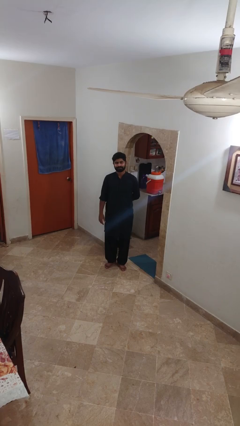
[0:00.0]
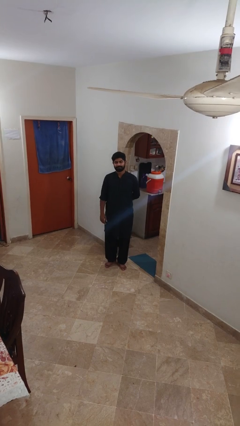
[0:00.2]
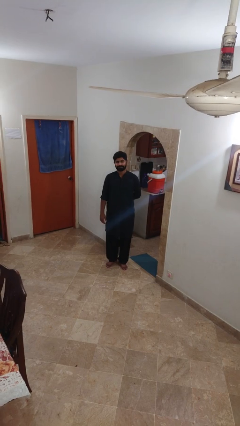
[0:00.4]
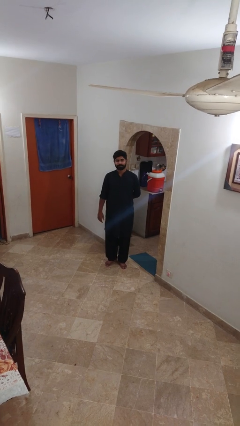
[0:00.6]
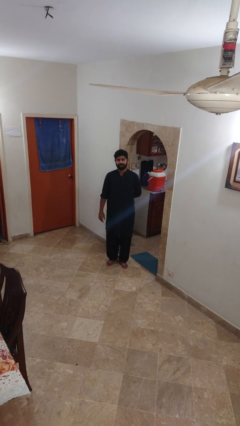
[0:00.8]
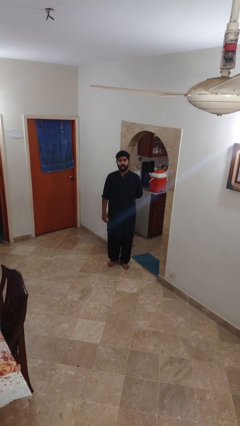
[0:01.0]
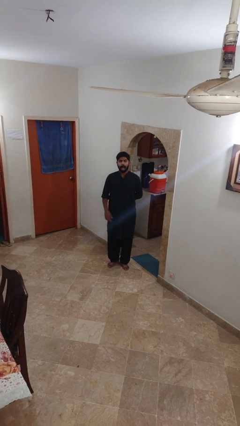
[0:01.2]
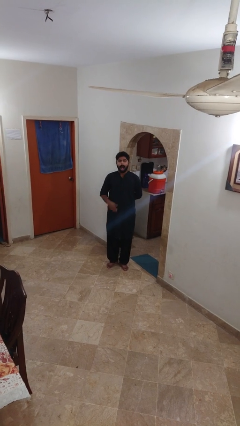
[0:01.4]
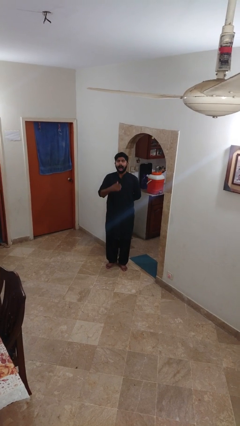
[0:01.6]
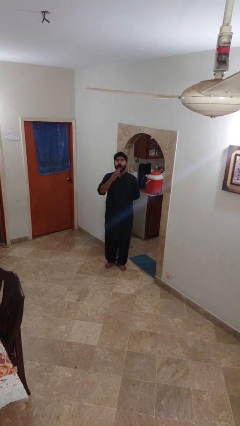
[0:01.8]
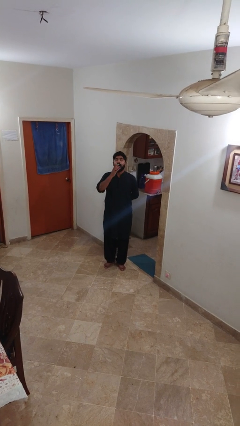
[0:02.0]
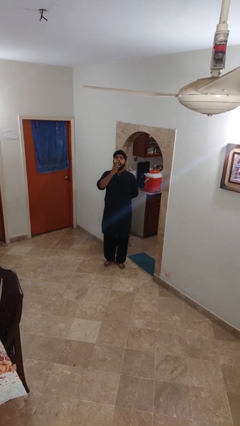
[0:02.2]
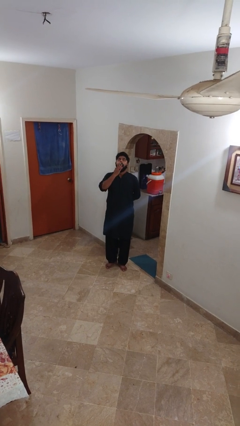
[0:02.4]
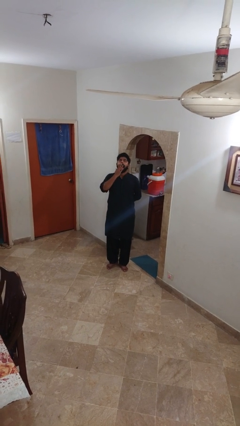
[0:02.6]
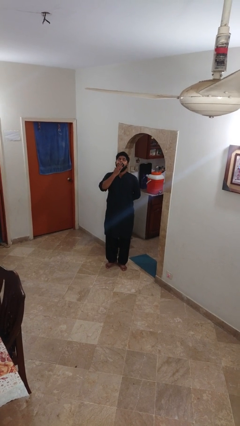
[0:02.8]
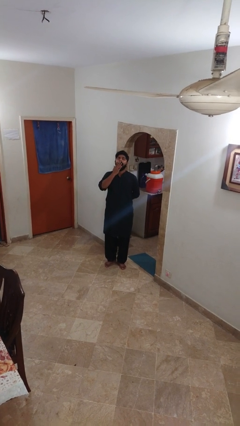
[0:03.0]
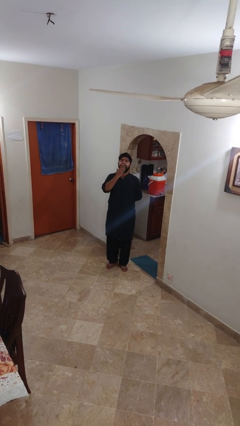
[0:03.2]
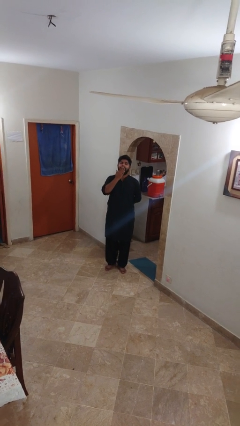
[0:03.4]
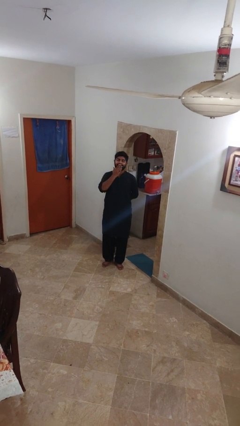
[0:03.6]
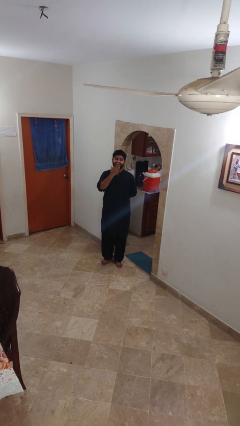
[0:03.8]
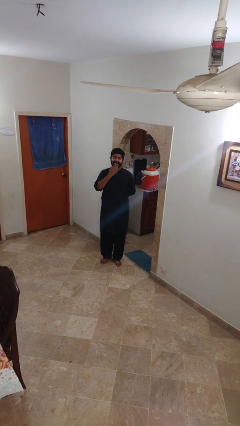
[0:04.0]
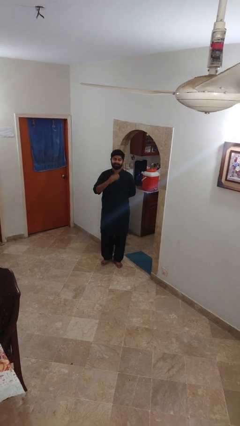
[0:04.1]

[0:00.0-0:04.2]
person yawns

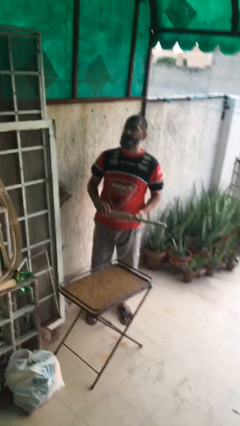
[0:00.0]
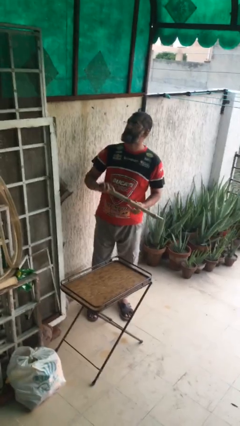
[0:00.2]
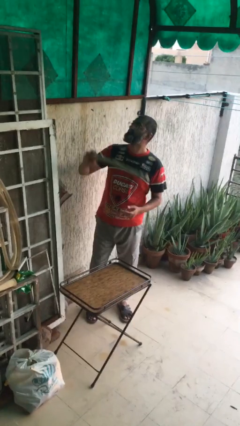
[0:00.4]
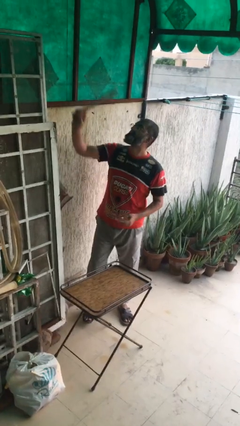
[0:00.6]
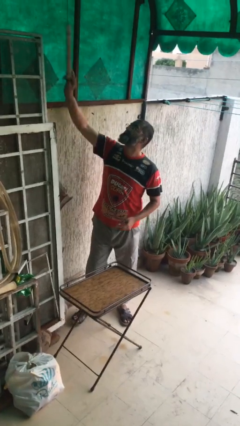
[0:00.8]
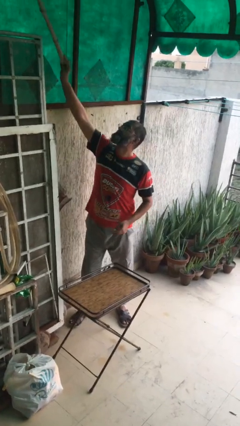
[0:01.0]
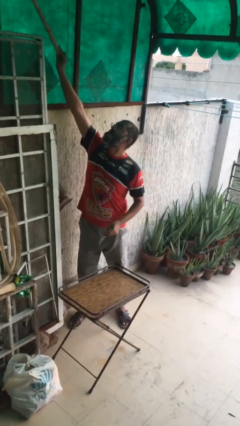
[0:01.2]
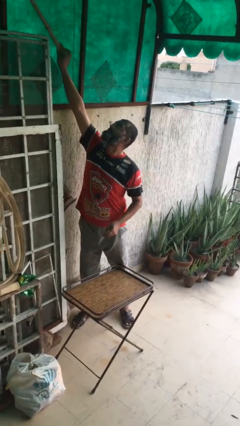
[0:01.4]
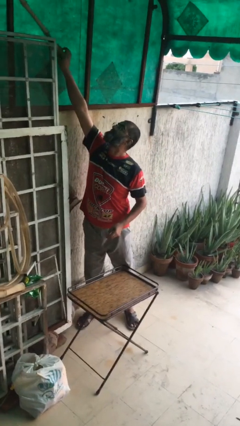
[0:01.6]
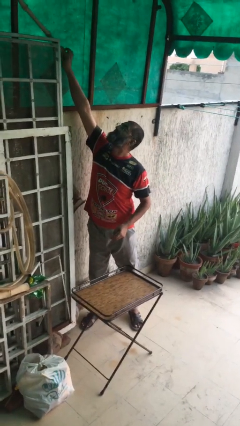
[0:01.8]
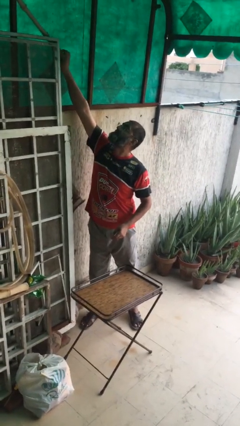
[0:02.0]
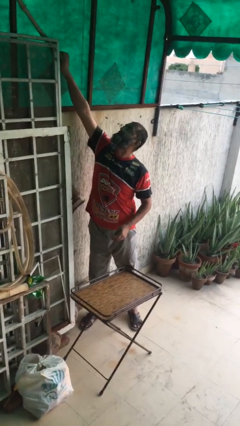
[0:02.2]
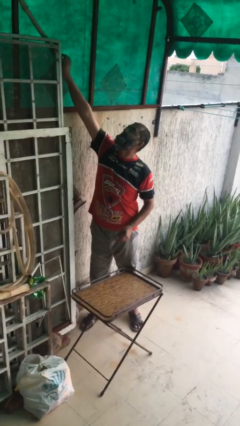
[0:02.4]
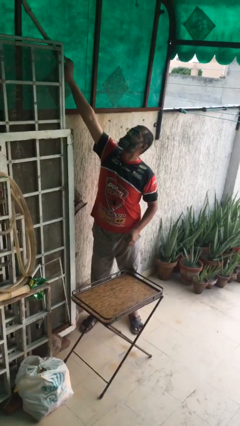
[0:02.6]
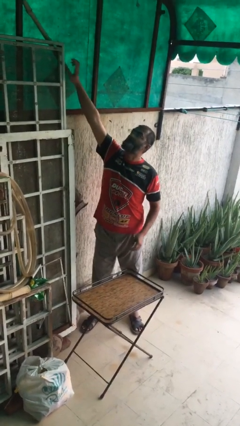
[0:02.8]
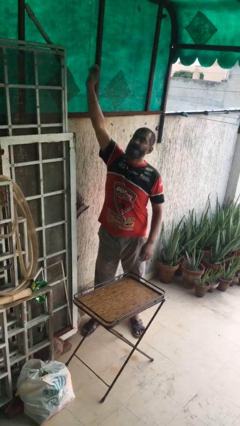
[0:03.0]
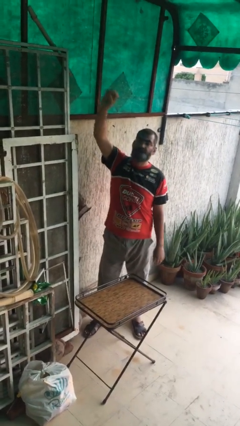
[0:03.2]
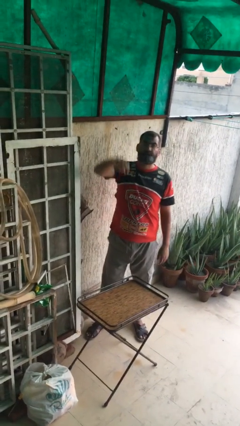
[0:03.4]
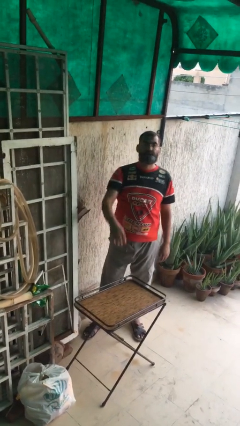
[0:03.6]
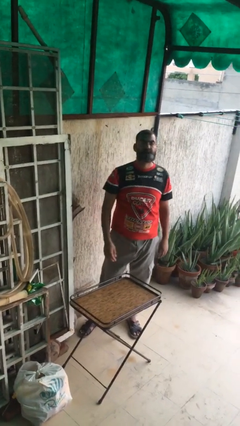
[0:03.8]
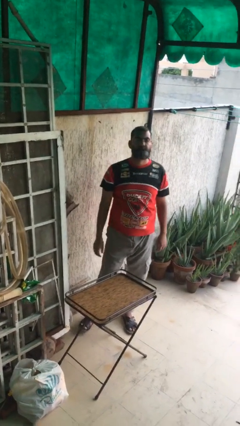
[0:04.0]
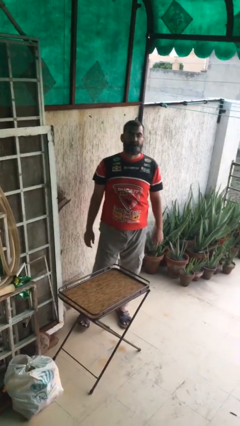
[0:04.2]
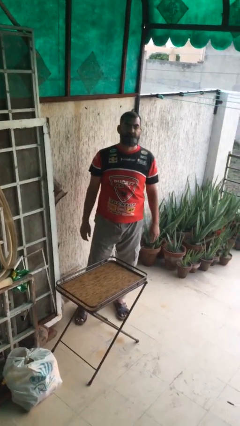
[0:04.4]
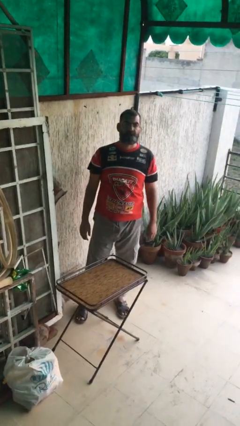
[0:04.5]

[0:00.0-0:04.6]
person puts down object on shelf

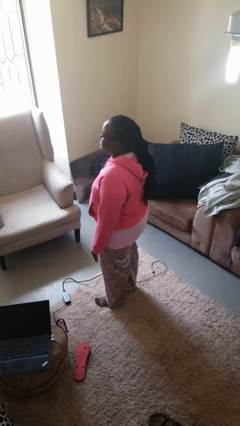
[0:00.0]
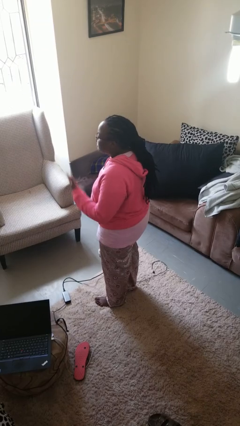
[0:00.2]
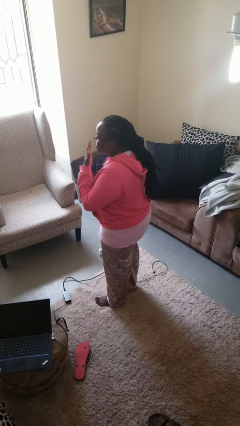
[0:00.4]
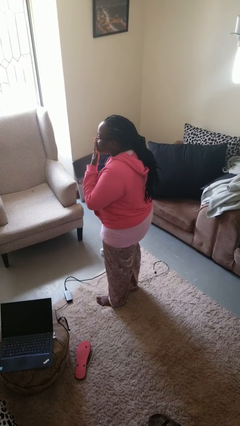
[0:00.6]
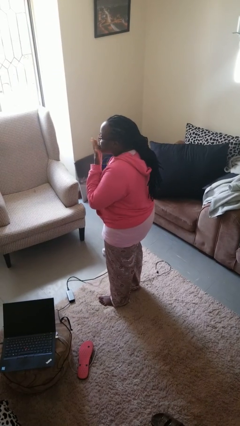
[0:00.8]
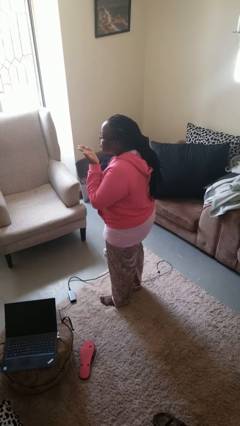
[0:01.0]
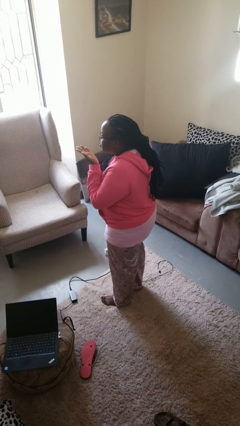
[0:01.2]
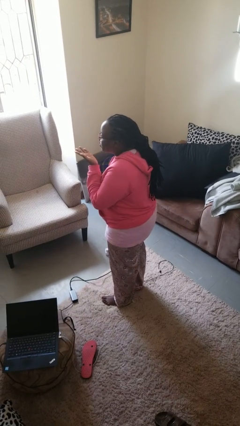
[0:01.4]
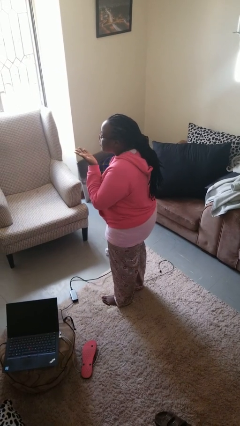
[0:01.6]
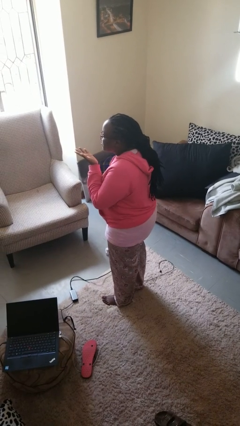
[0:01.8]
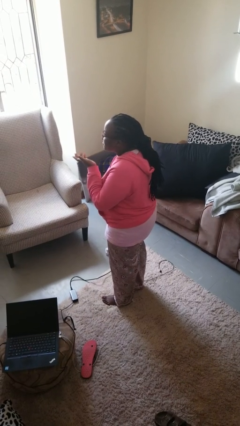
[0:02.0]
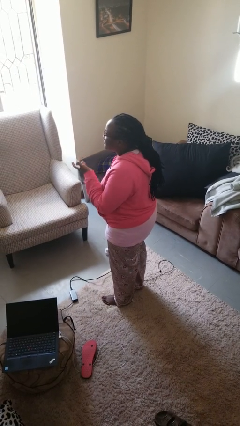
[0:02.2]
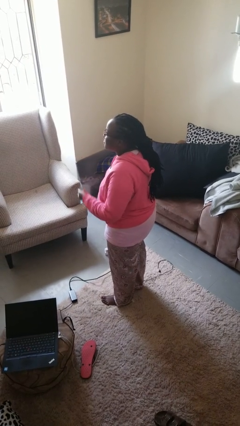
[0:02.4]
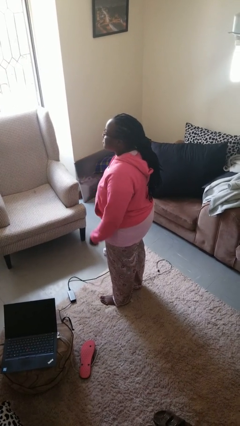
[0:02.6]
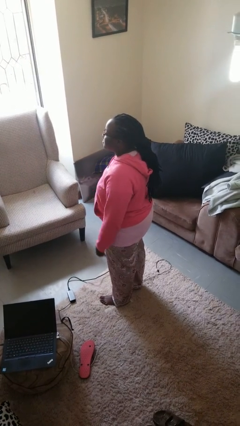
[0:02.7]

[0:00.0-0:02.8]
person gestures blow kiss

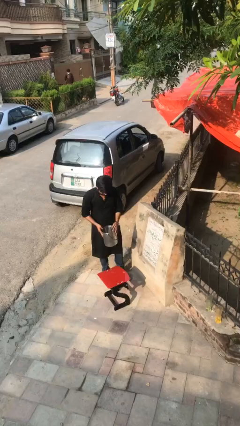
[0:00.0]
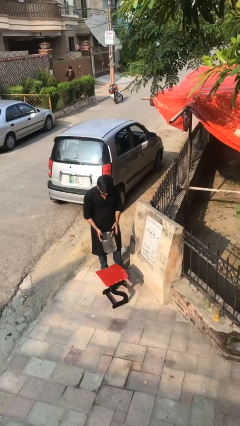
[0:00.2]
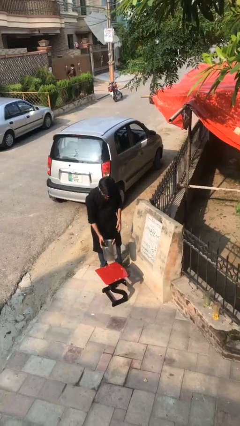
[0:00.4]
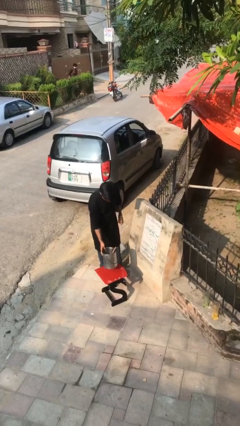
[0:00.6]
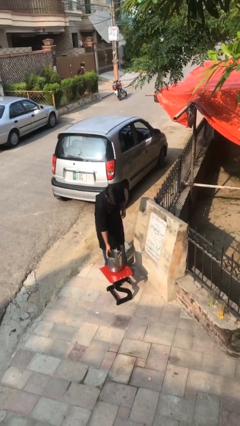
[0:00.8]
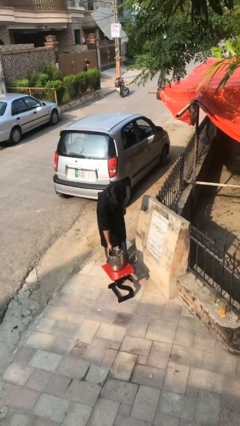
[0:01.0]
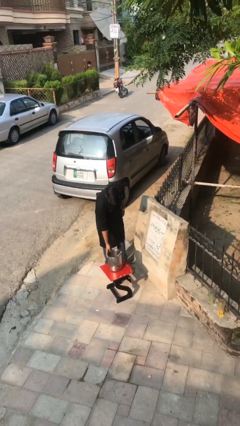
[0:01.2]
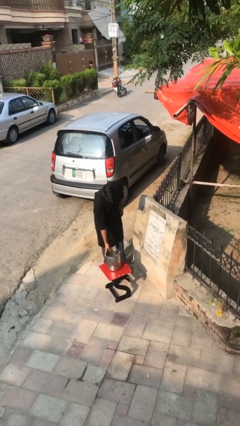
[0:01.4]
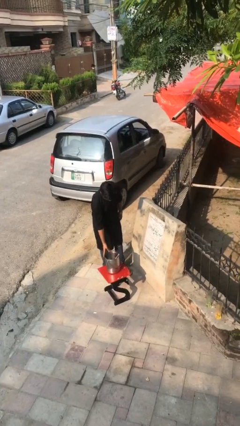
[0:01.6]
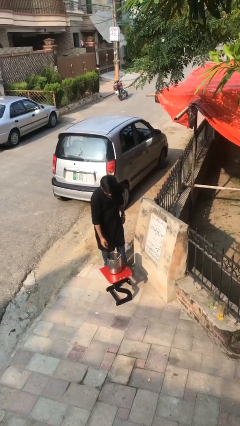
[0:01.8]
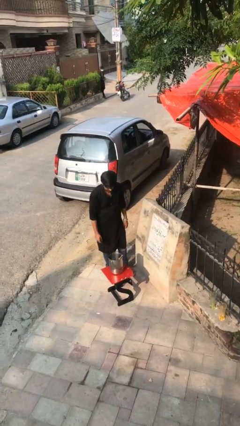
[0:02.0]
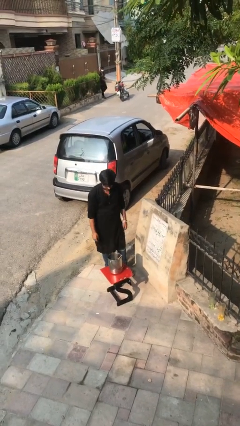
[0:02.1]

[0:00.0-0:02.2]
person puts down object on table

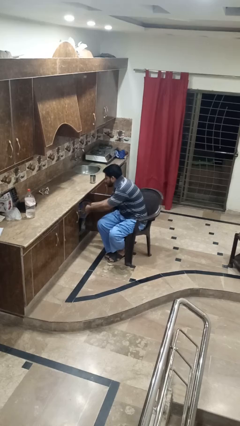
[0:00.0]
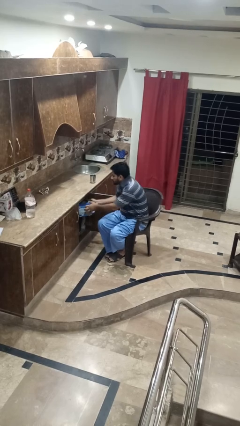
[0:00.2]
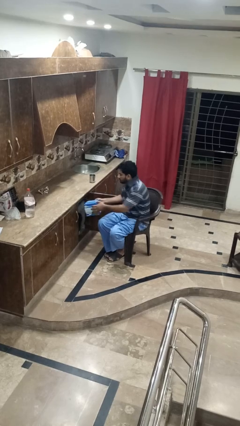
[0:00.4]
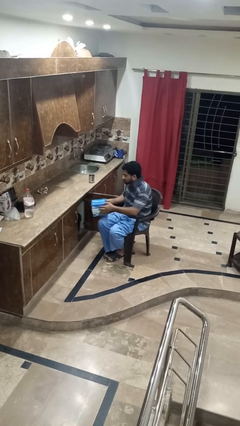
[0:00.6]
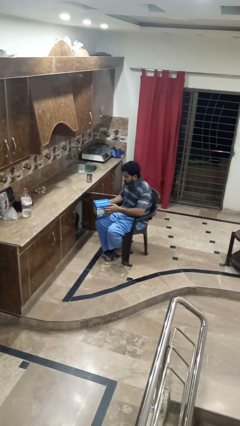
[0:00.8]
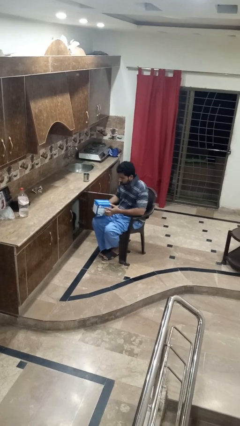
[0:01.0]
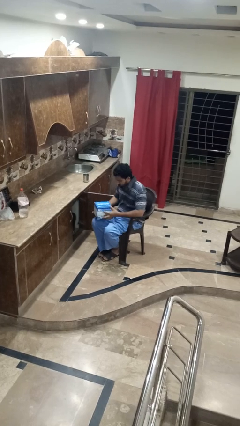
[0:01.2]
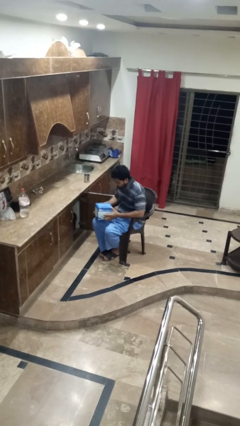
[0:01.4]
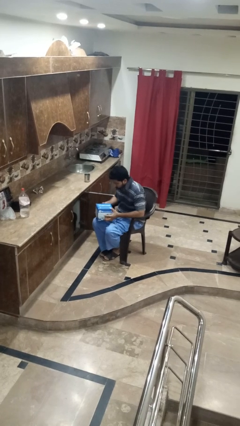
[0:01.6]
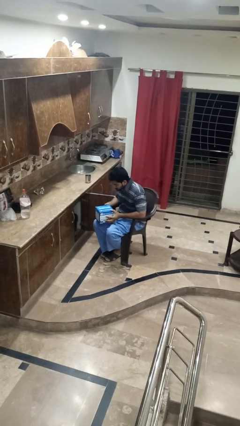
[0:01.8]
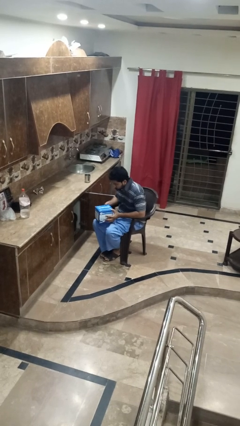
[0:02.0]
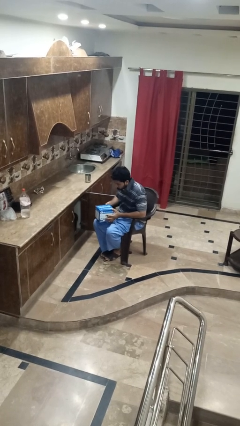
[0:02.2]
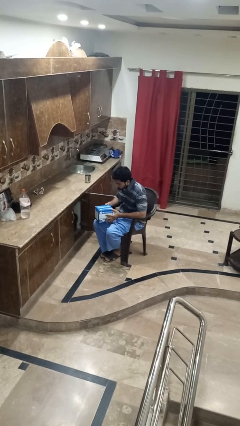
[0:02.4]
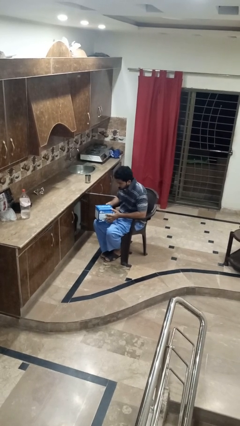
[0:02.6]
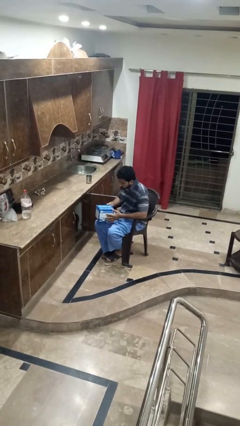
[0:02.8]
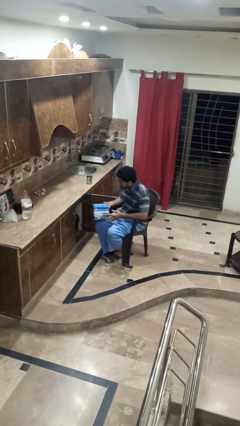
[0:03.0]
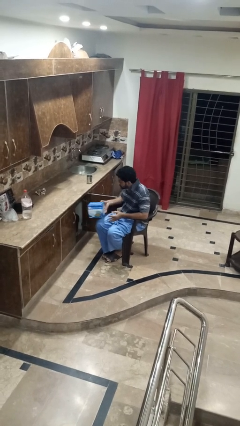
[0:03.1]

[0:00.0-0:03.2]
person picks up object from cabinet

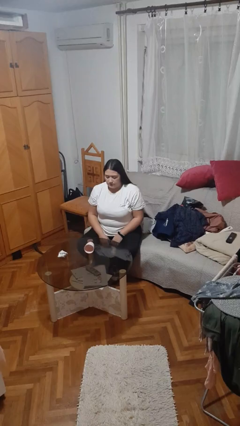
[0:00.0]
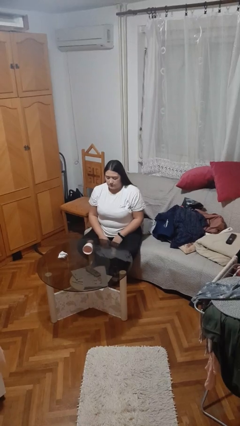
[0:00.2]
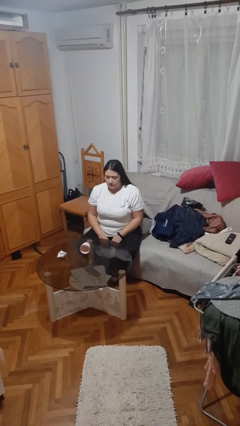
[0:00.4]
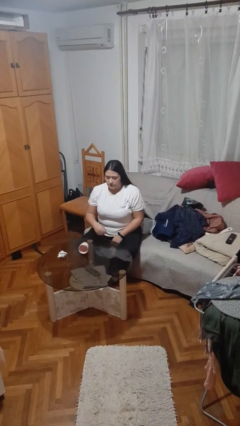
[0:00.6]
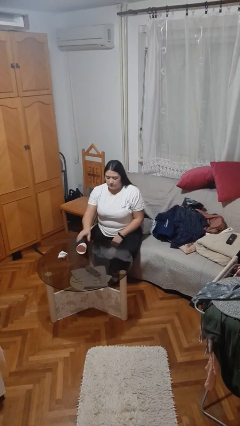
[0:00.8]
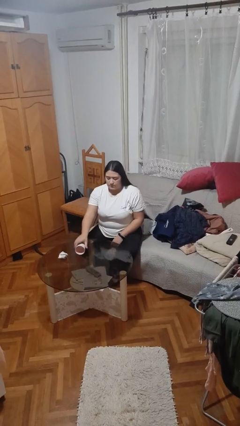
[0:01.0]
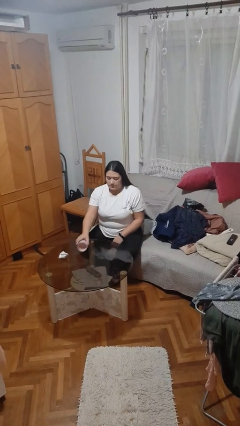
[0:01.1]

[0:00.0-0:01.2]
person sets upright glass
